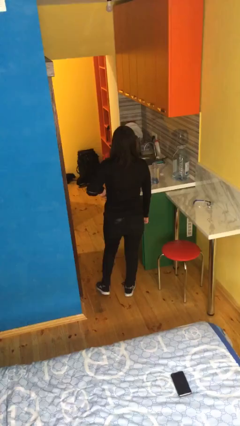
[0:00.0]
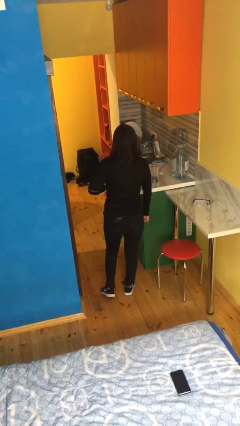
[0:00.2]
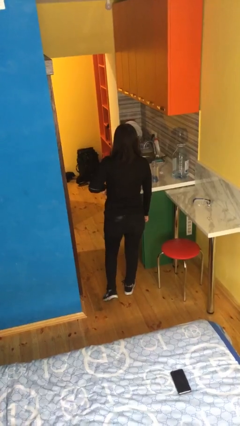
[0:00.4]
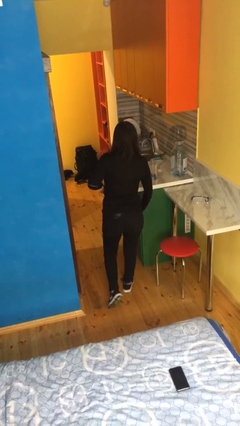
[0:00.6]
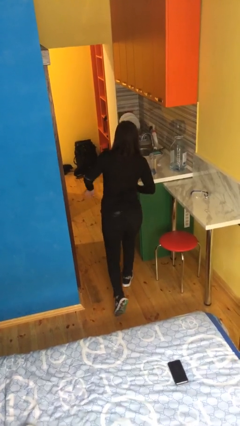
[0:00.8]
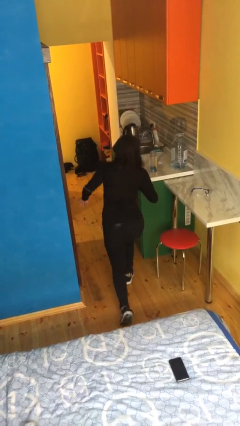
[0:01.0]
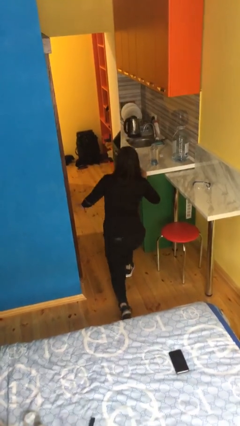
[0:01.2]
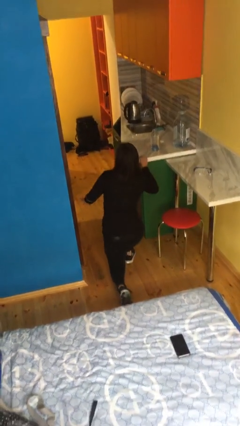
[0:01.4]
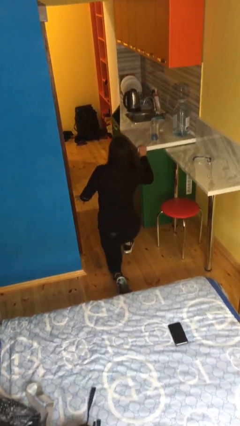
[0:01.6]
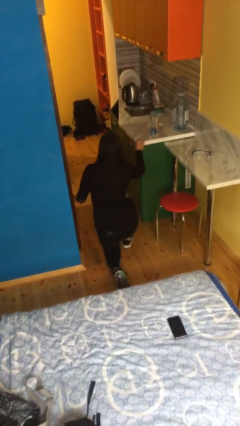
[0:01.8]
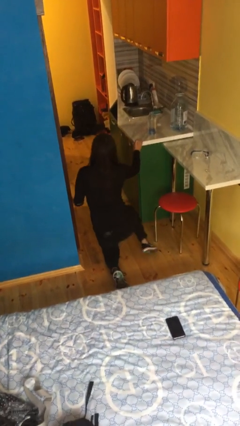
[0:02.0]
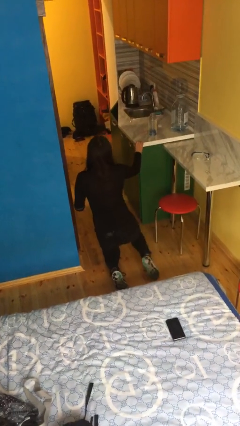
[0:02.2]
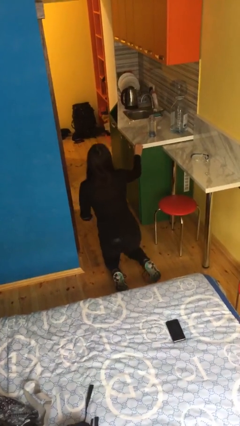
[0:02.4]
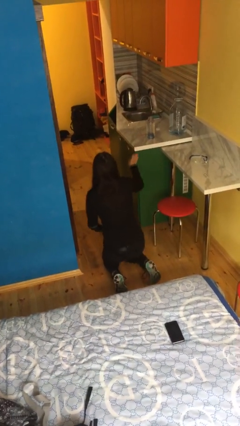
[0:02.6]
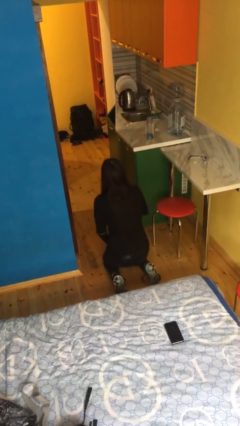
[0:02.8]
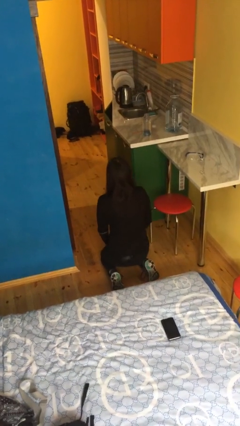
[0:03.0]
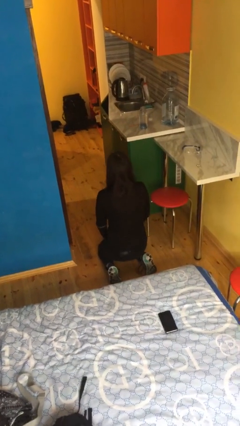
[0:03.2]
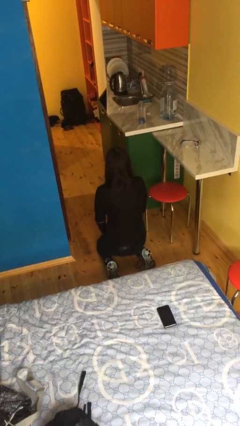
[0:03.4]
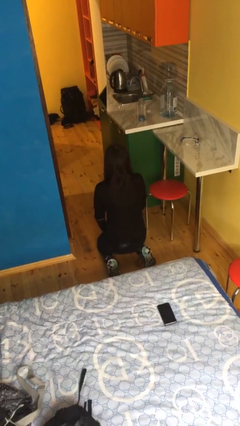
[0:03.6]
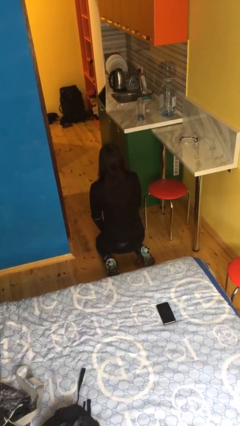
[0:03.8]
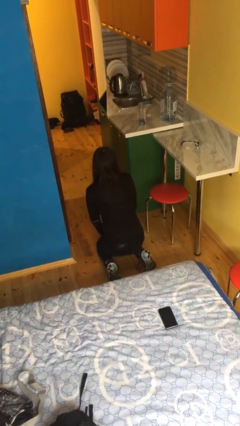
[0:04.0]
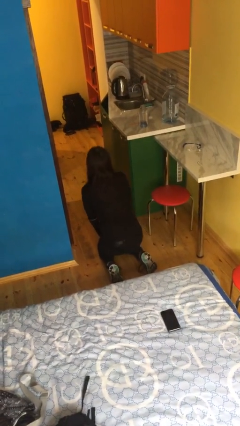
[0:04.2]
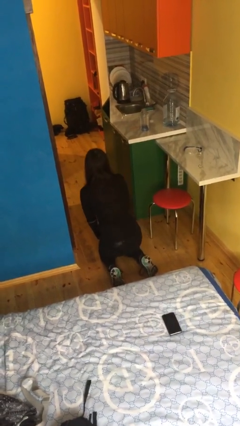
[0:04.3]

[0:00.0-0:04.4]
person kneels

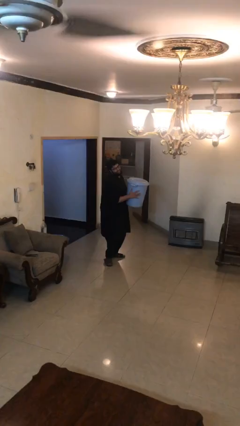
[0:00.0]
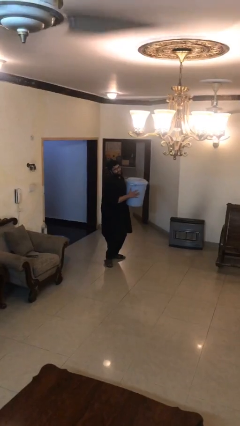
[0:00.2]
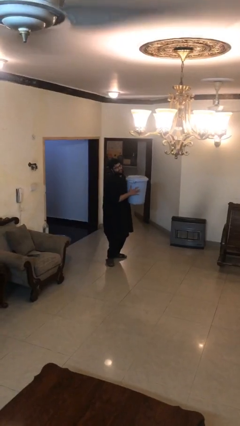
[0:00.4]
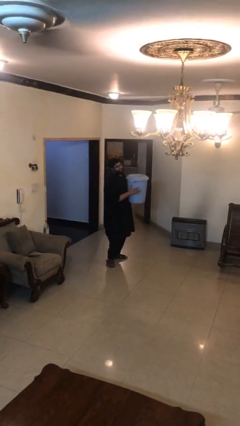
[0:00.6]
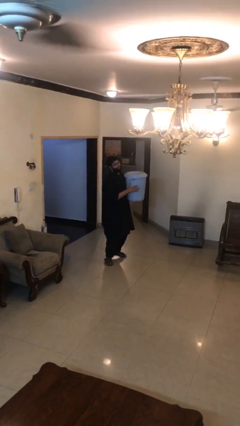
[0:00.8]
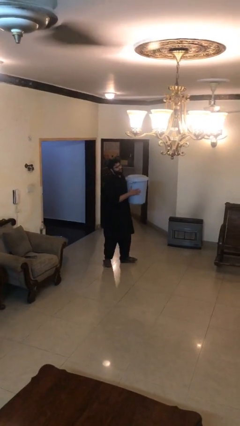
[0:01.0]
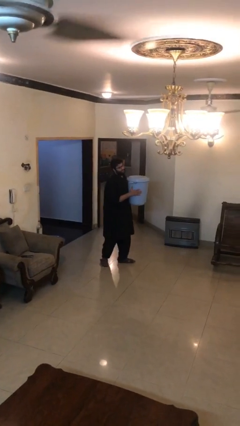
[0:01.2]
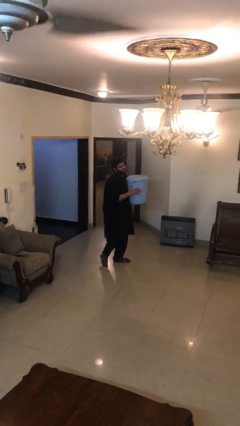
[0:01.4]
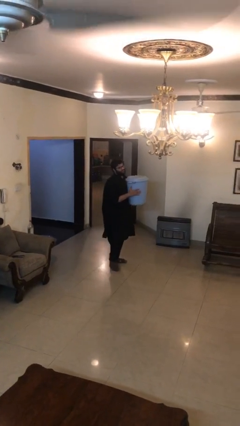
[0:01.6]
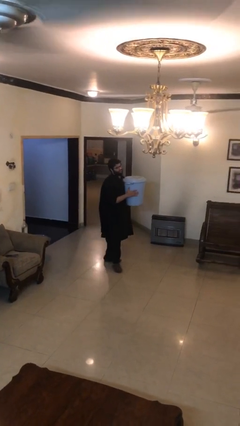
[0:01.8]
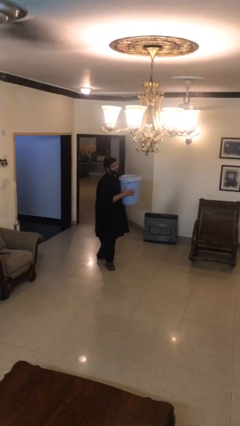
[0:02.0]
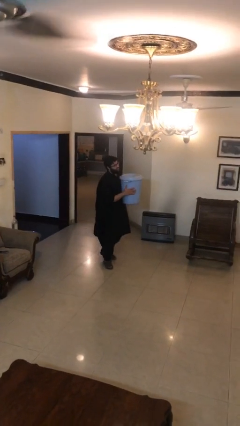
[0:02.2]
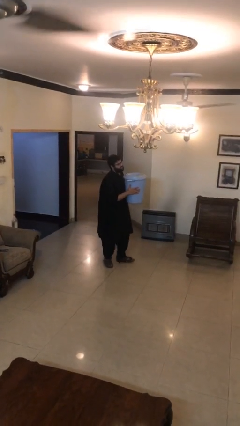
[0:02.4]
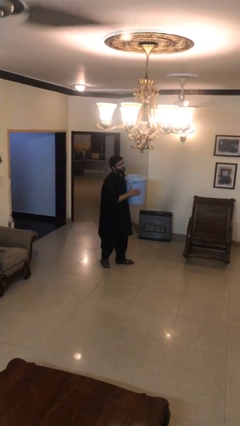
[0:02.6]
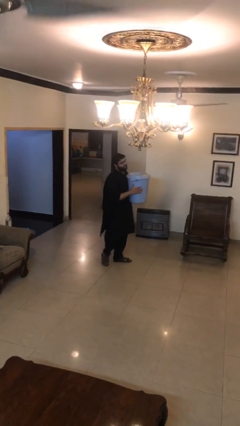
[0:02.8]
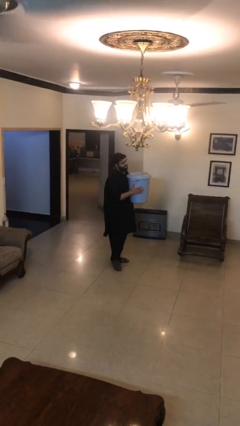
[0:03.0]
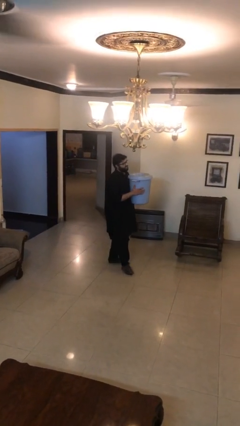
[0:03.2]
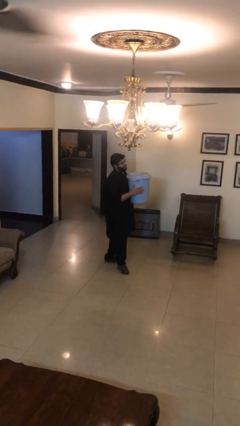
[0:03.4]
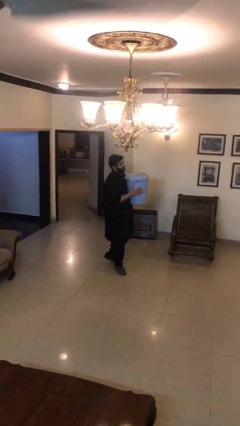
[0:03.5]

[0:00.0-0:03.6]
person carries heavy object

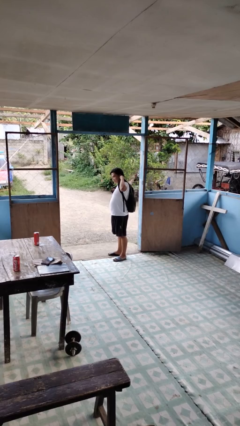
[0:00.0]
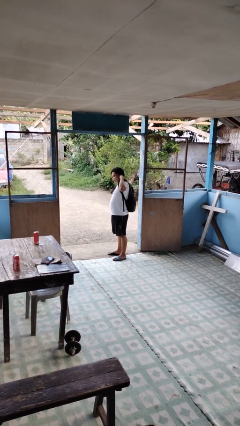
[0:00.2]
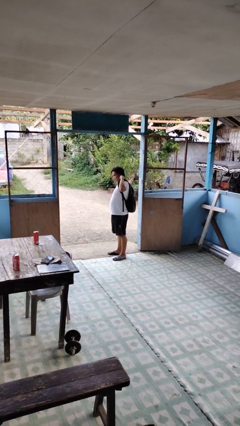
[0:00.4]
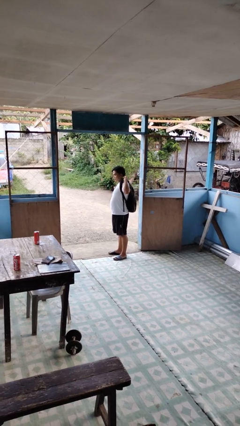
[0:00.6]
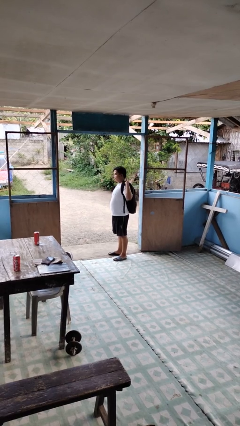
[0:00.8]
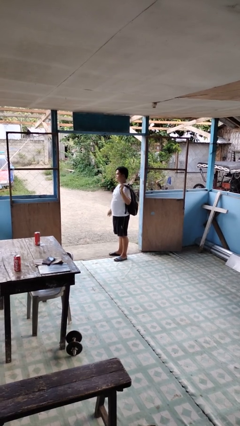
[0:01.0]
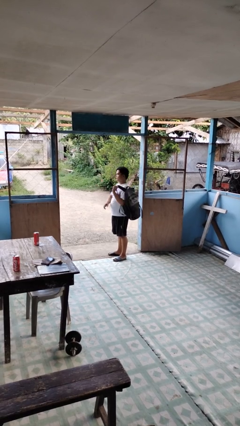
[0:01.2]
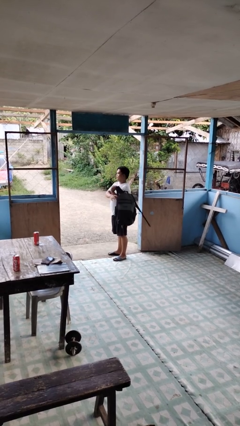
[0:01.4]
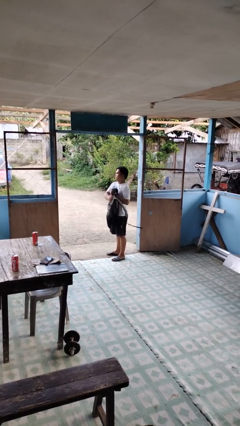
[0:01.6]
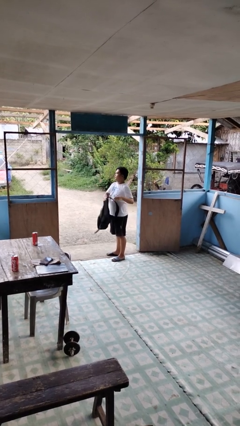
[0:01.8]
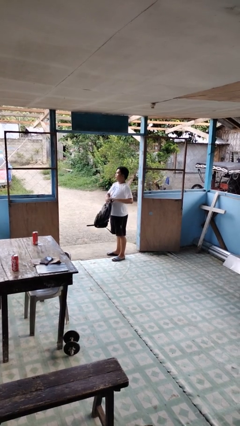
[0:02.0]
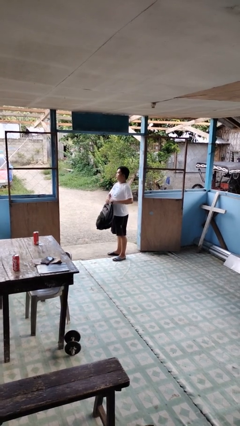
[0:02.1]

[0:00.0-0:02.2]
person takes off backpack

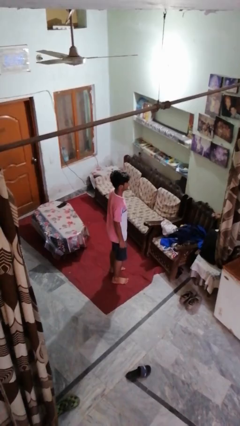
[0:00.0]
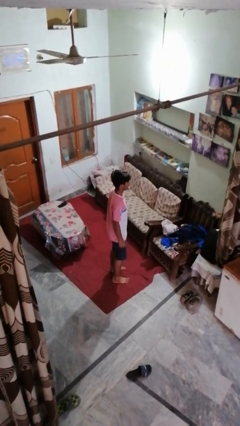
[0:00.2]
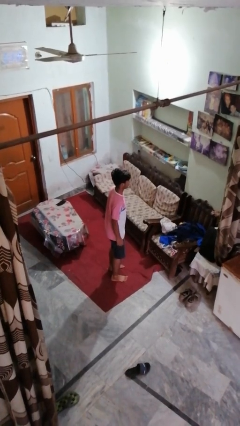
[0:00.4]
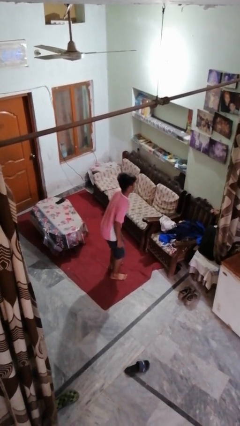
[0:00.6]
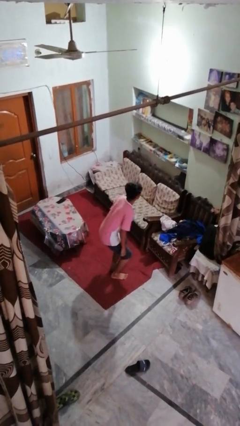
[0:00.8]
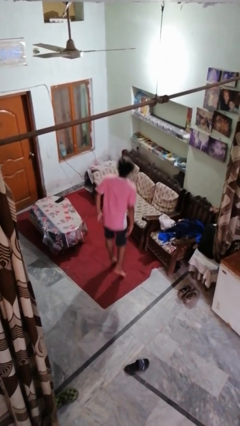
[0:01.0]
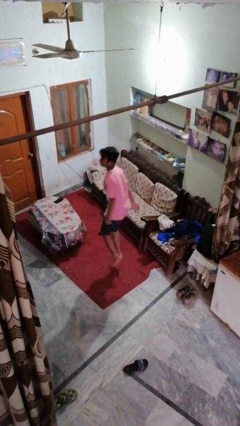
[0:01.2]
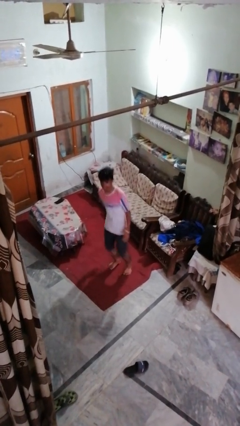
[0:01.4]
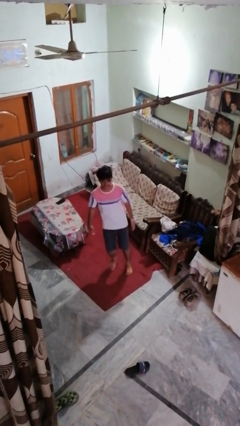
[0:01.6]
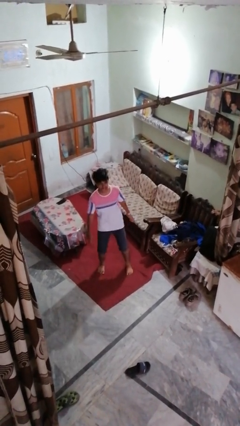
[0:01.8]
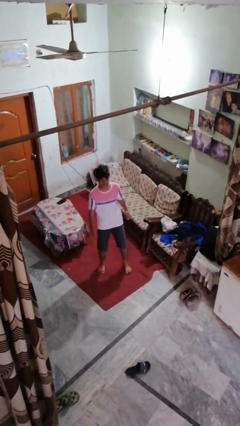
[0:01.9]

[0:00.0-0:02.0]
person jumps

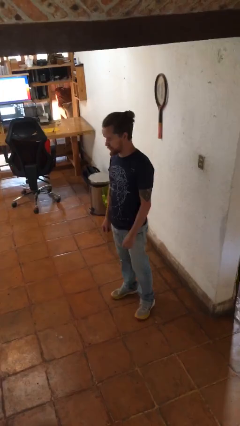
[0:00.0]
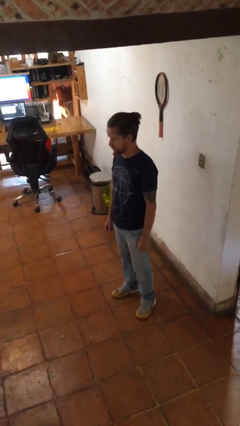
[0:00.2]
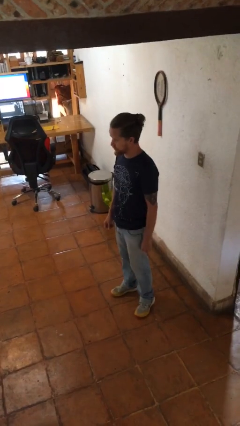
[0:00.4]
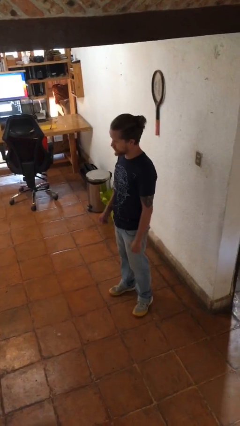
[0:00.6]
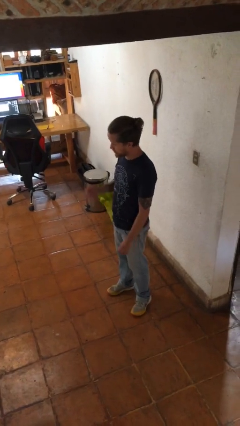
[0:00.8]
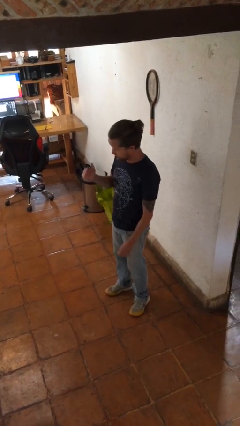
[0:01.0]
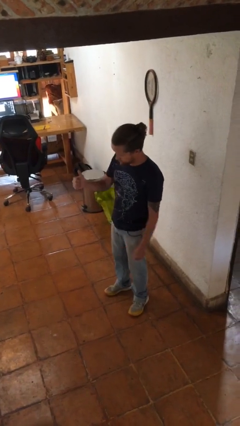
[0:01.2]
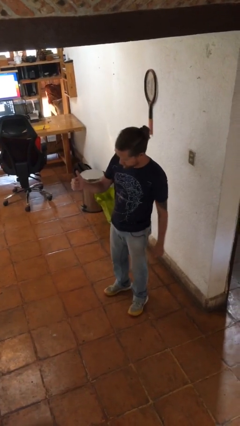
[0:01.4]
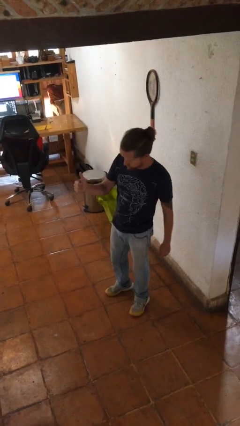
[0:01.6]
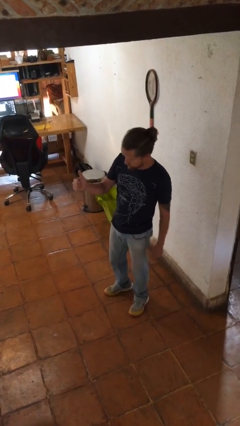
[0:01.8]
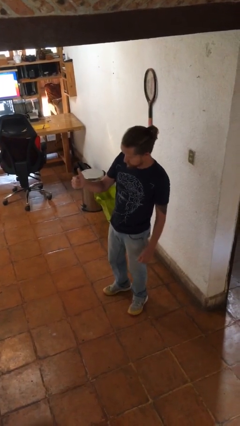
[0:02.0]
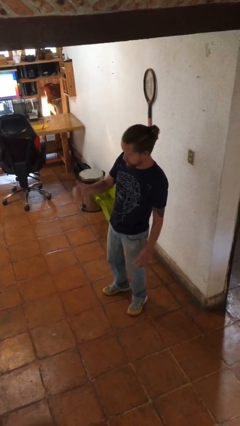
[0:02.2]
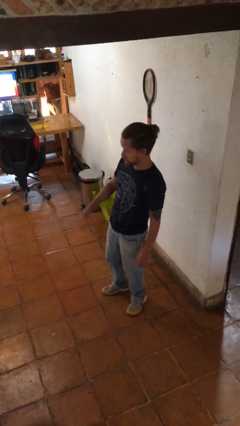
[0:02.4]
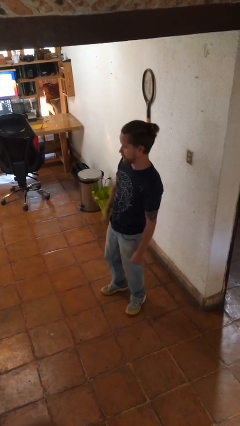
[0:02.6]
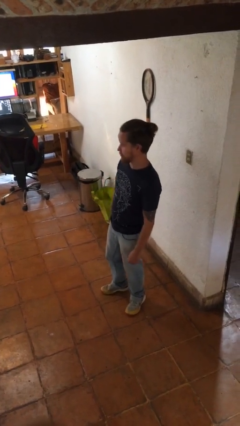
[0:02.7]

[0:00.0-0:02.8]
person gestures thumbs up

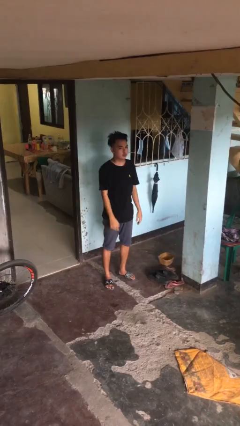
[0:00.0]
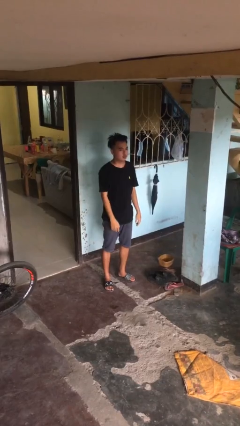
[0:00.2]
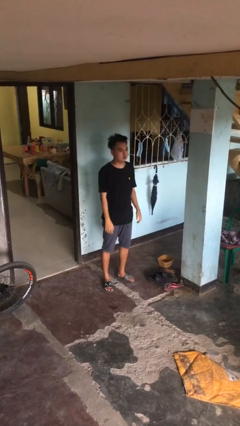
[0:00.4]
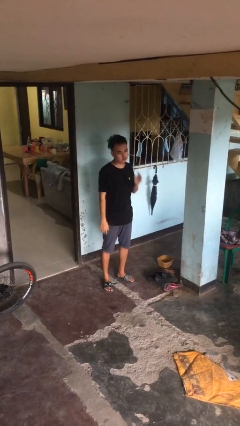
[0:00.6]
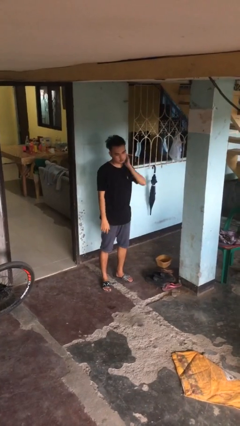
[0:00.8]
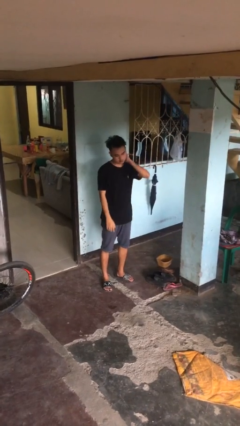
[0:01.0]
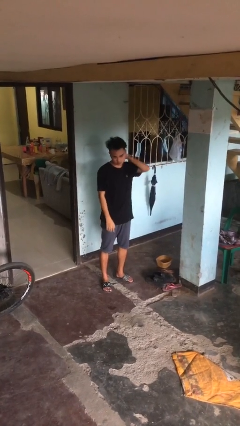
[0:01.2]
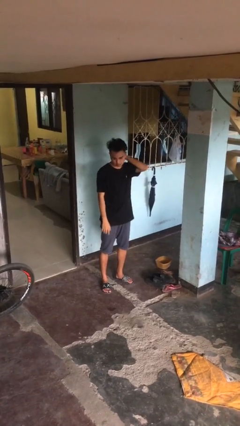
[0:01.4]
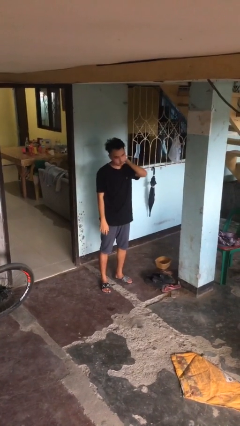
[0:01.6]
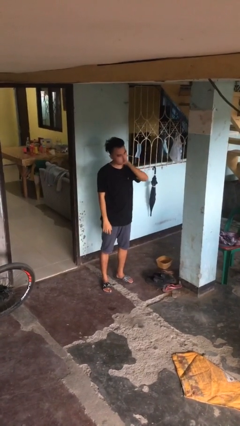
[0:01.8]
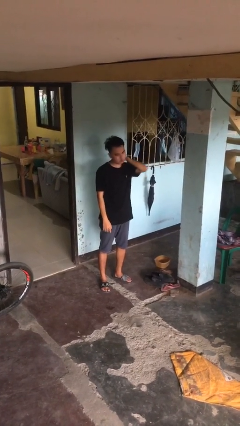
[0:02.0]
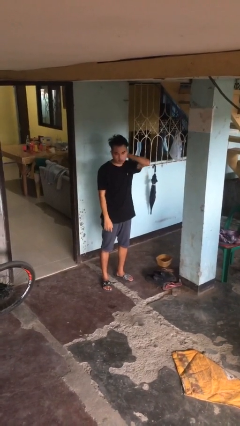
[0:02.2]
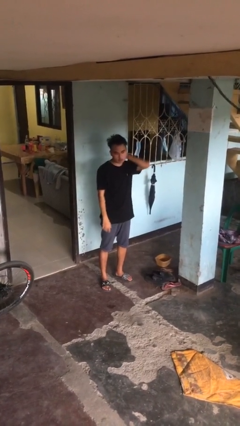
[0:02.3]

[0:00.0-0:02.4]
person rubs neck
